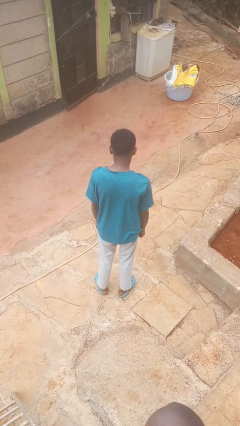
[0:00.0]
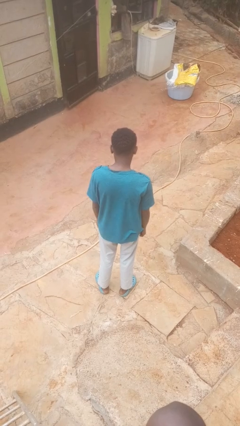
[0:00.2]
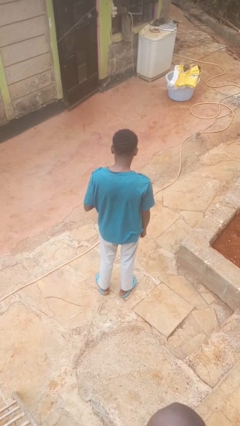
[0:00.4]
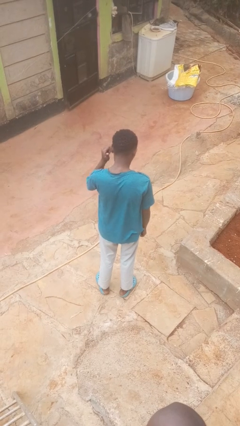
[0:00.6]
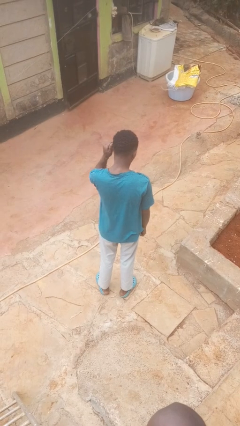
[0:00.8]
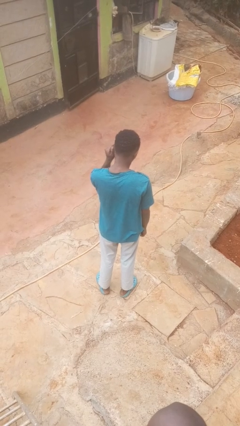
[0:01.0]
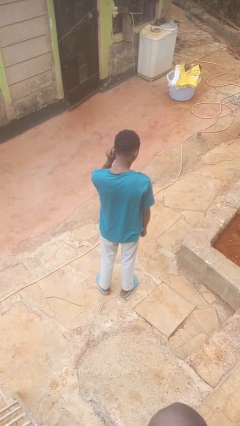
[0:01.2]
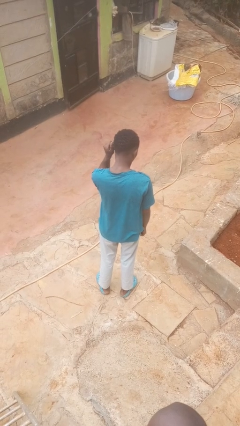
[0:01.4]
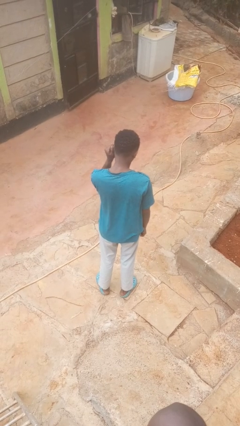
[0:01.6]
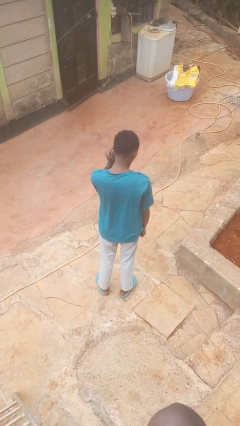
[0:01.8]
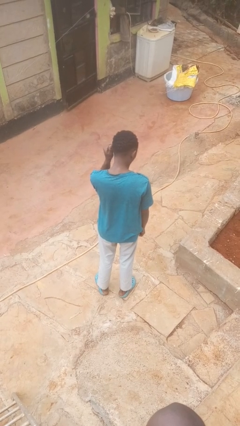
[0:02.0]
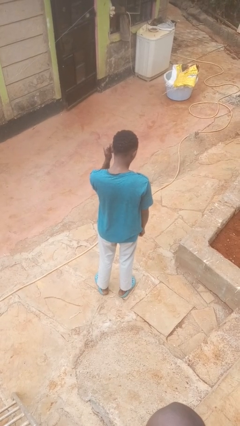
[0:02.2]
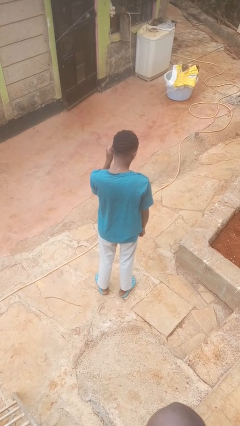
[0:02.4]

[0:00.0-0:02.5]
person touches earlobe

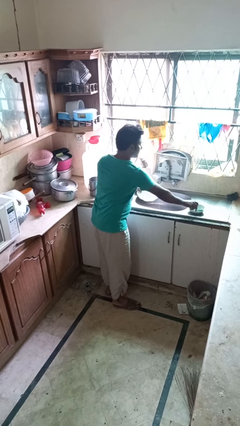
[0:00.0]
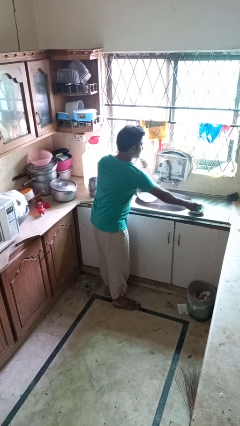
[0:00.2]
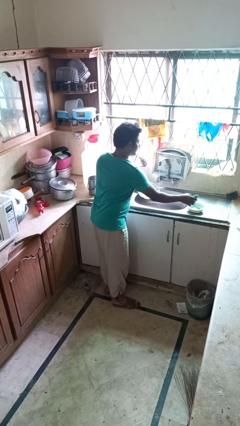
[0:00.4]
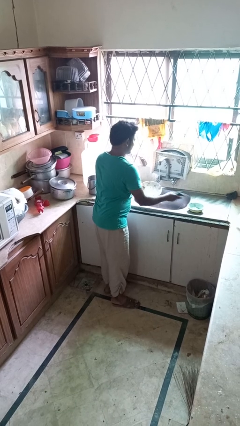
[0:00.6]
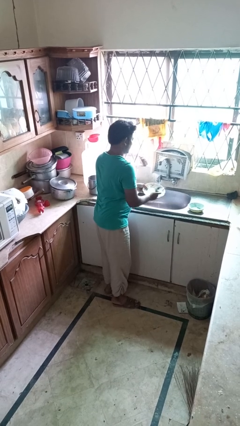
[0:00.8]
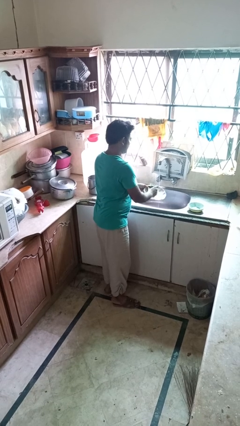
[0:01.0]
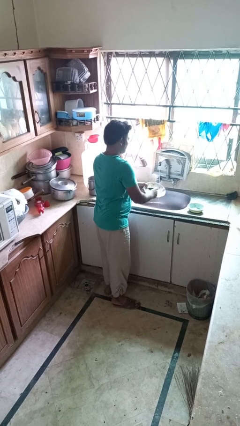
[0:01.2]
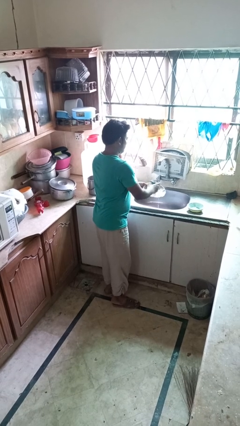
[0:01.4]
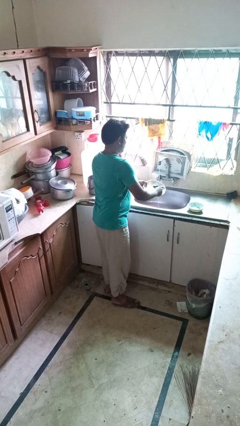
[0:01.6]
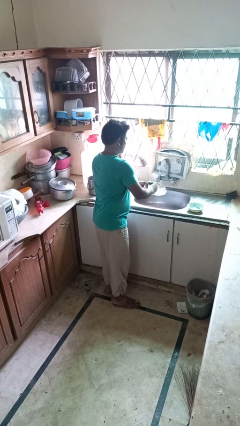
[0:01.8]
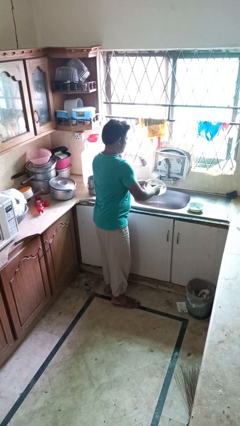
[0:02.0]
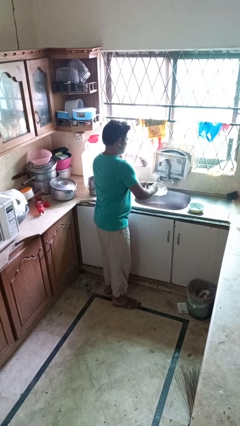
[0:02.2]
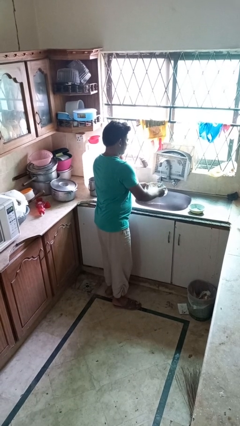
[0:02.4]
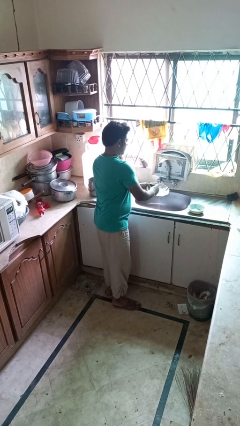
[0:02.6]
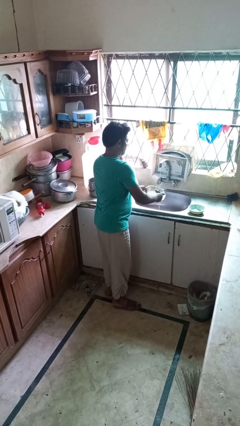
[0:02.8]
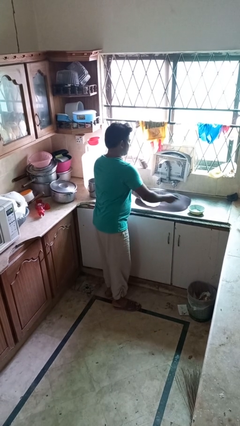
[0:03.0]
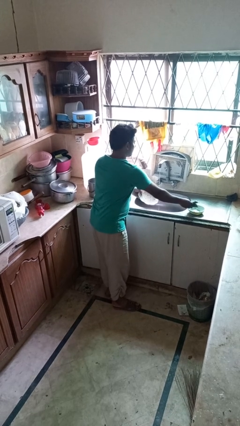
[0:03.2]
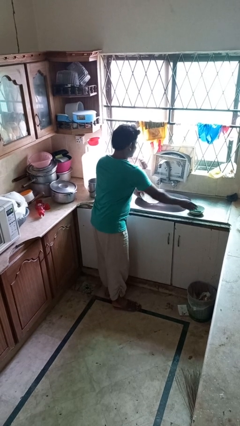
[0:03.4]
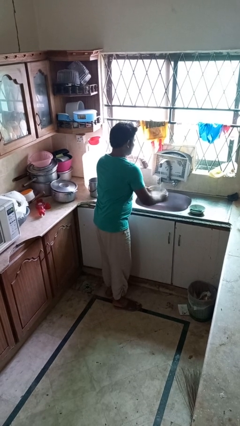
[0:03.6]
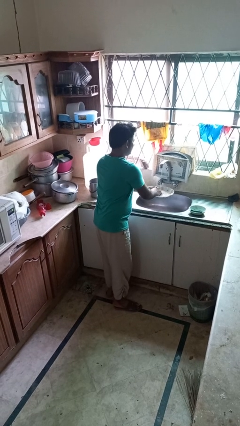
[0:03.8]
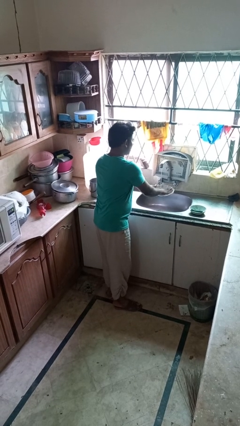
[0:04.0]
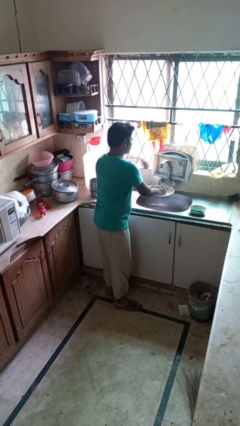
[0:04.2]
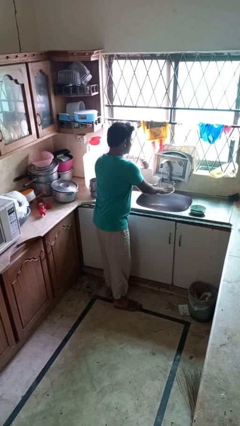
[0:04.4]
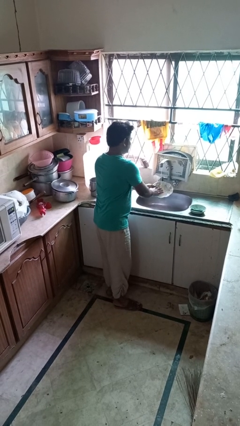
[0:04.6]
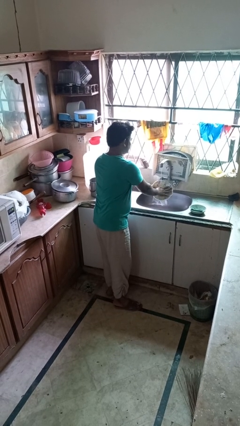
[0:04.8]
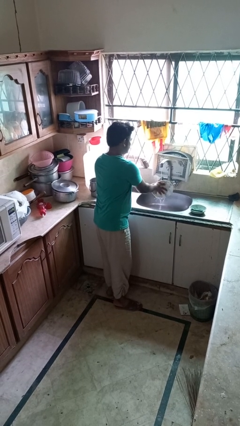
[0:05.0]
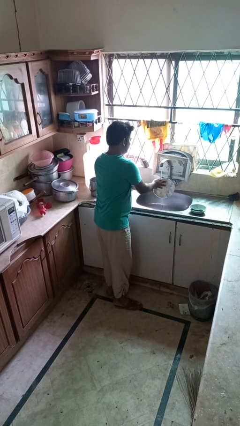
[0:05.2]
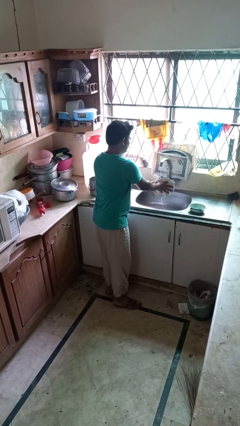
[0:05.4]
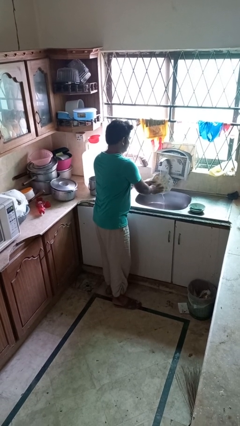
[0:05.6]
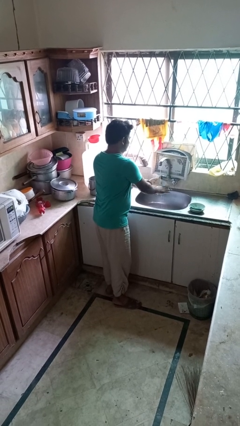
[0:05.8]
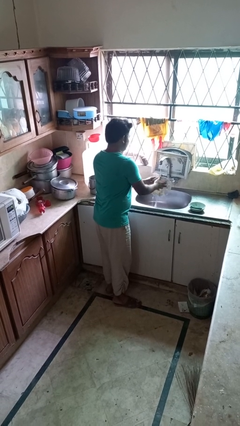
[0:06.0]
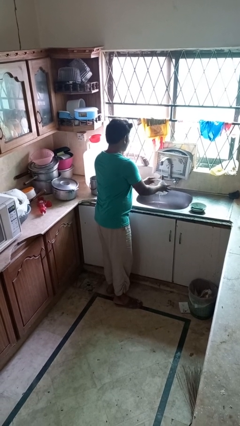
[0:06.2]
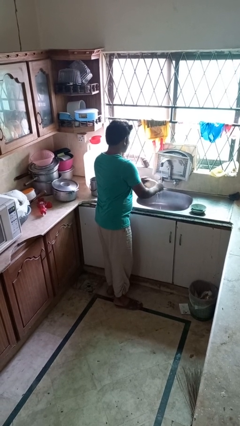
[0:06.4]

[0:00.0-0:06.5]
person washes dish

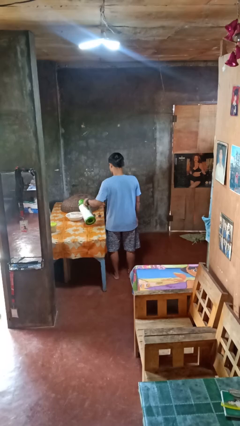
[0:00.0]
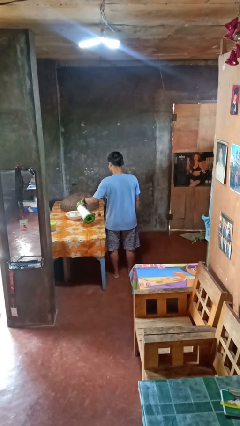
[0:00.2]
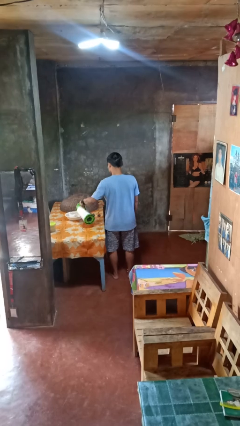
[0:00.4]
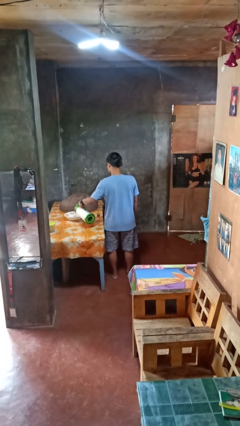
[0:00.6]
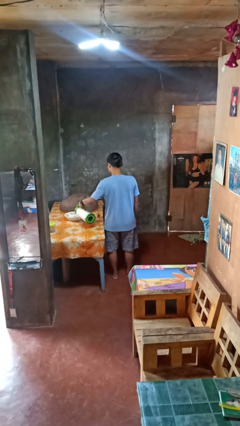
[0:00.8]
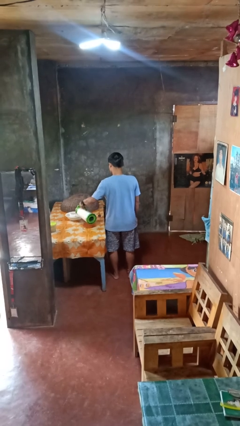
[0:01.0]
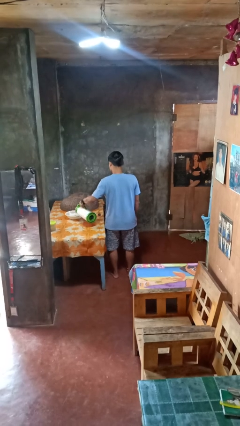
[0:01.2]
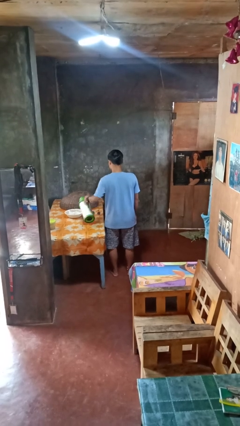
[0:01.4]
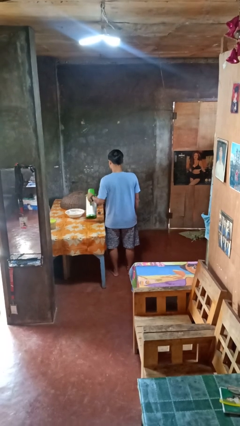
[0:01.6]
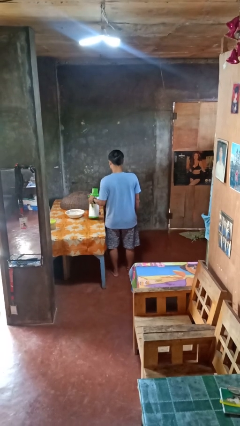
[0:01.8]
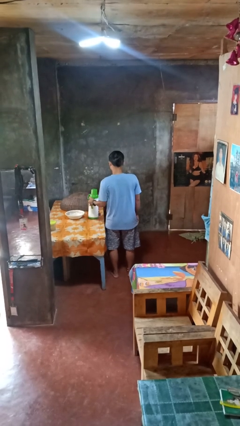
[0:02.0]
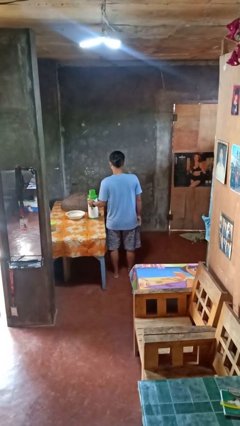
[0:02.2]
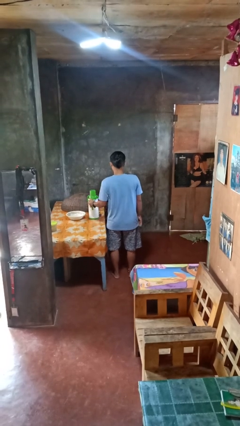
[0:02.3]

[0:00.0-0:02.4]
person pours into bowl

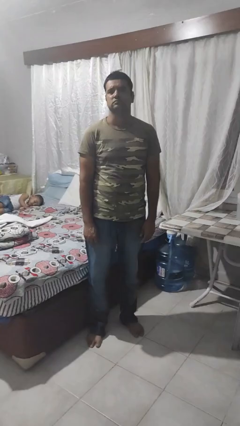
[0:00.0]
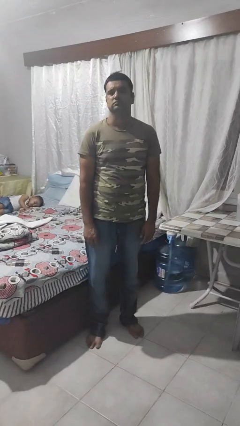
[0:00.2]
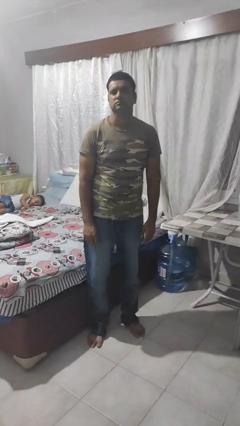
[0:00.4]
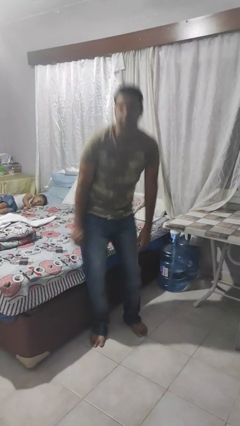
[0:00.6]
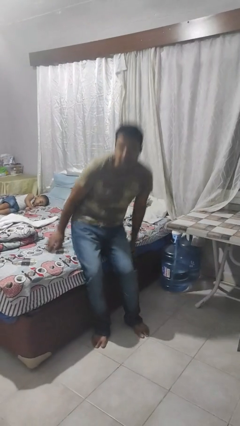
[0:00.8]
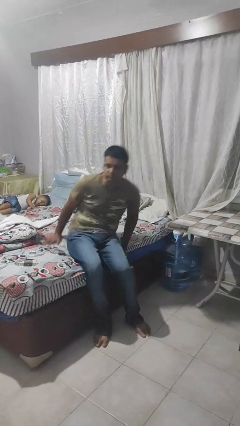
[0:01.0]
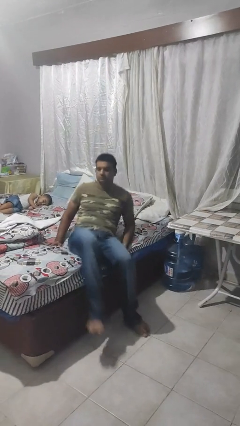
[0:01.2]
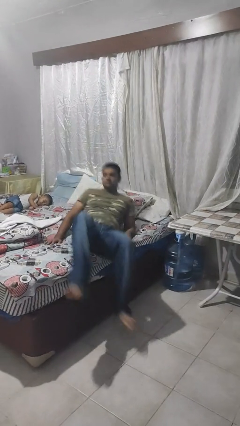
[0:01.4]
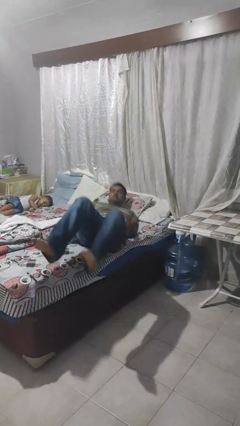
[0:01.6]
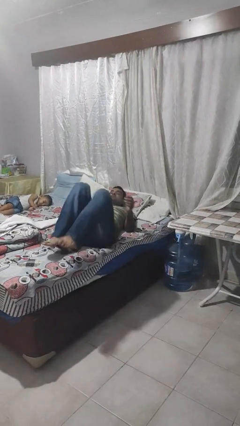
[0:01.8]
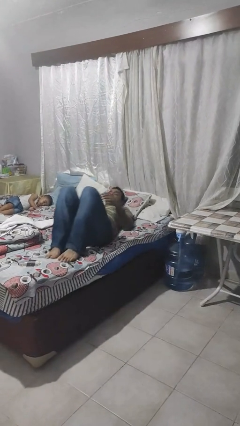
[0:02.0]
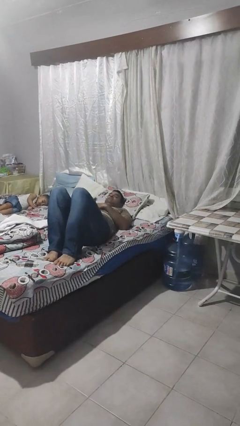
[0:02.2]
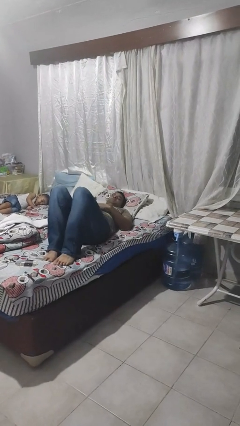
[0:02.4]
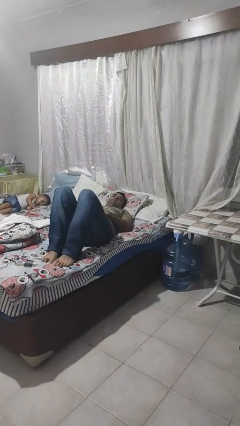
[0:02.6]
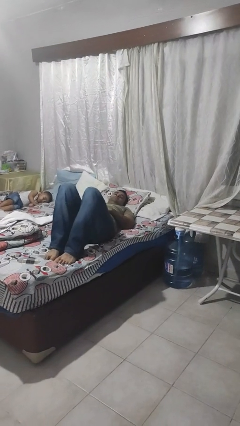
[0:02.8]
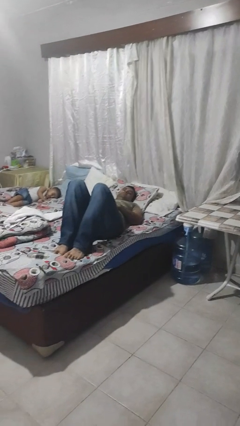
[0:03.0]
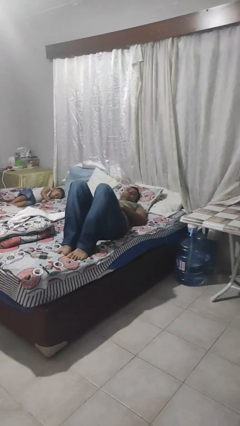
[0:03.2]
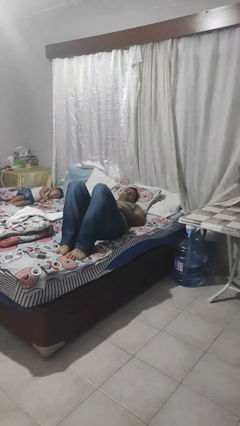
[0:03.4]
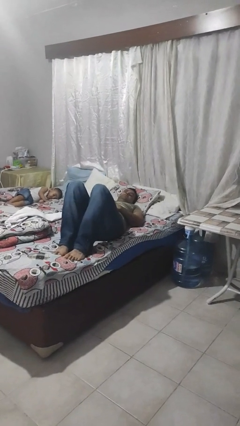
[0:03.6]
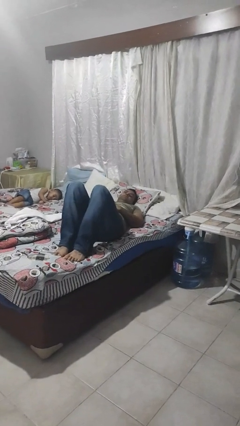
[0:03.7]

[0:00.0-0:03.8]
person lies down on bed

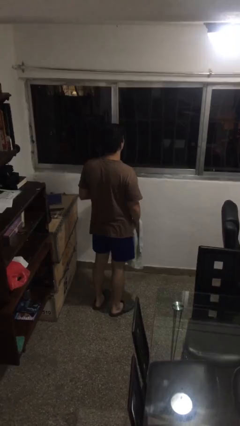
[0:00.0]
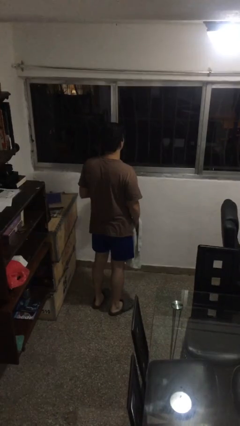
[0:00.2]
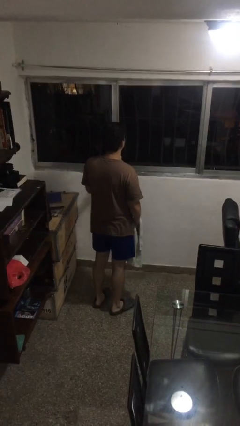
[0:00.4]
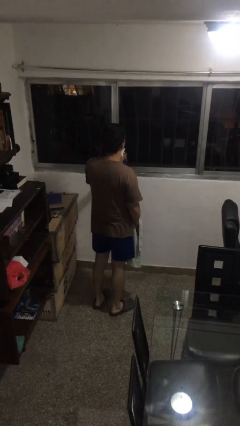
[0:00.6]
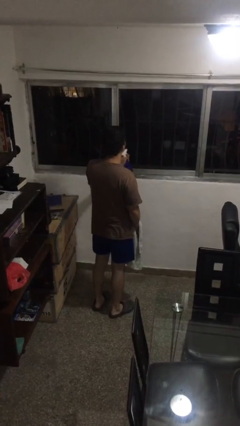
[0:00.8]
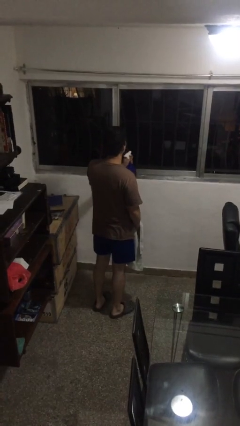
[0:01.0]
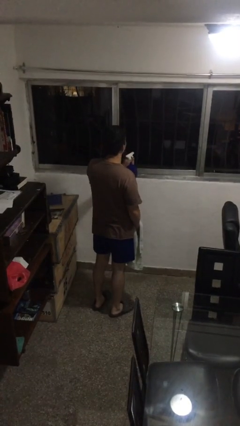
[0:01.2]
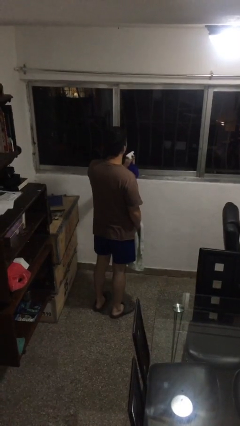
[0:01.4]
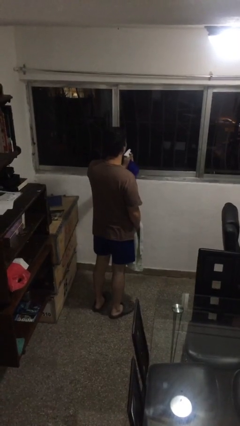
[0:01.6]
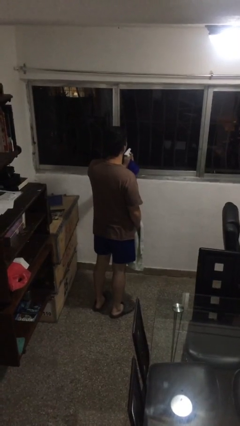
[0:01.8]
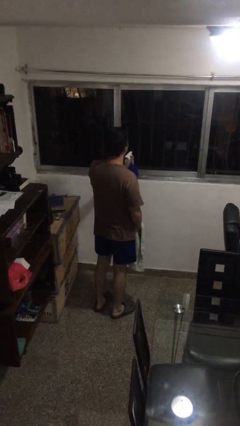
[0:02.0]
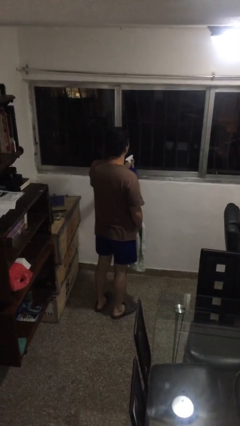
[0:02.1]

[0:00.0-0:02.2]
person sprays from bottle
